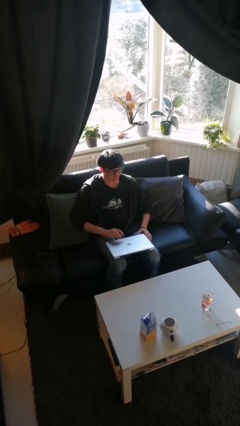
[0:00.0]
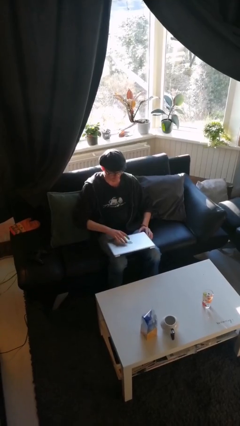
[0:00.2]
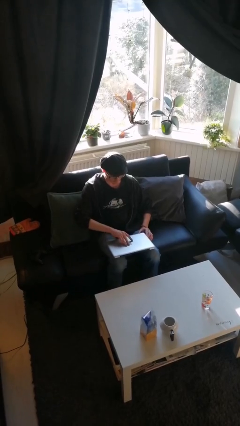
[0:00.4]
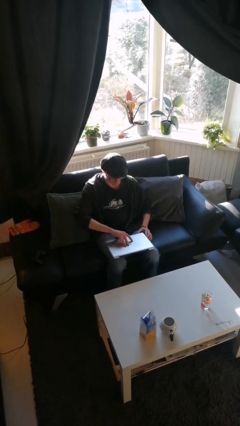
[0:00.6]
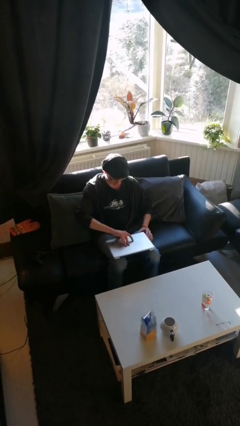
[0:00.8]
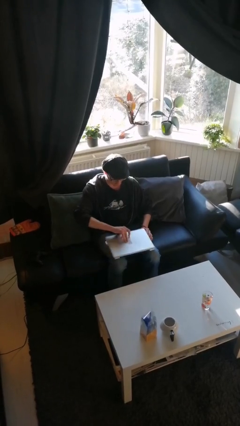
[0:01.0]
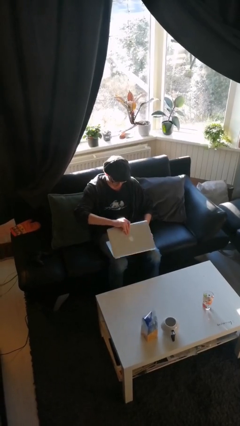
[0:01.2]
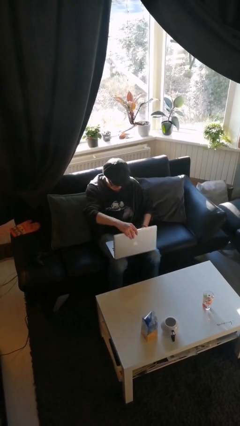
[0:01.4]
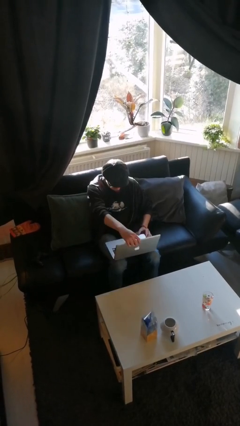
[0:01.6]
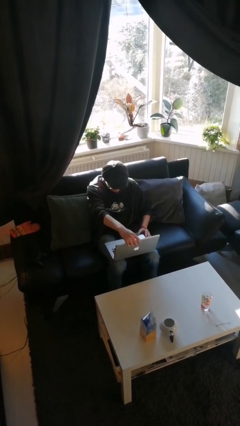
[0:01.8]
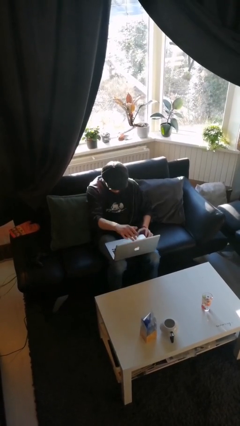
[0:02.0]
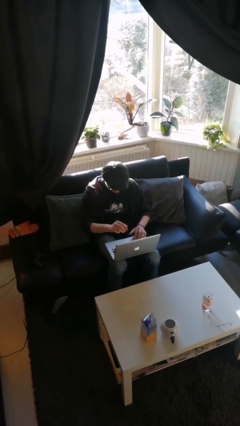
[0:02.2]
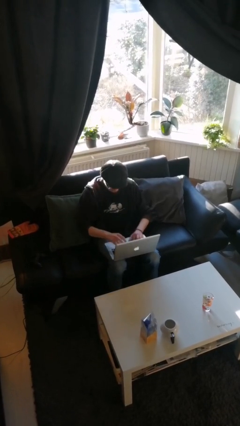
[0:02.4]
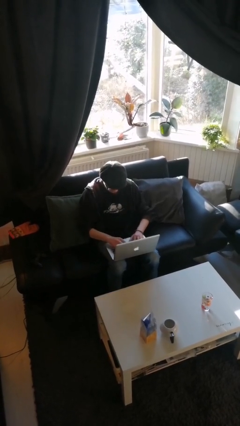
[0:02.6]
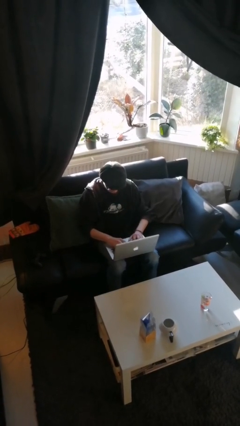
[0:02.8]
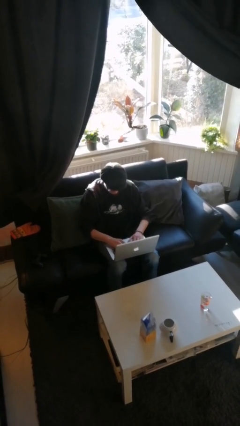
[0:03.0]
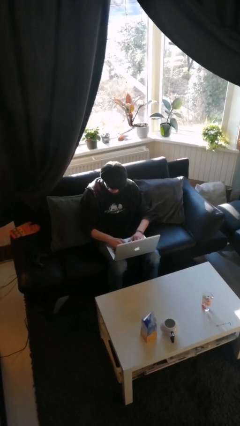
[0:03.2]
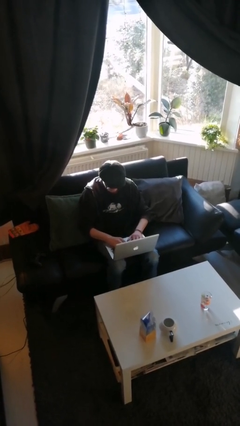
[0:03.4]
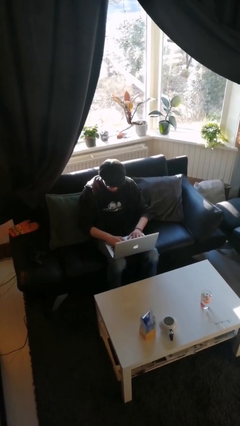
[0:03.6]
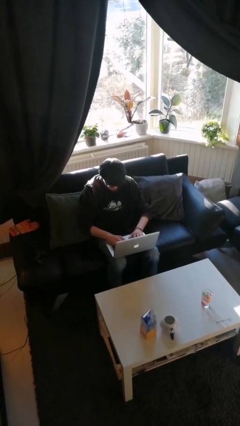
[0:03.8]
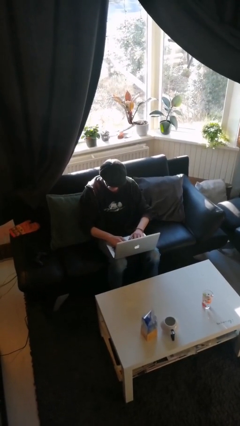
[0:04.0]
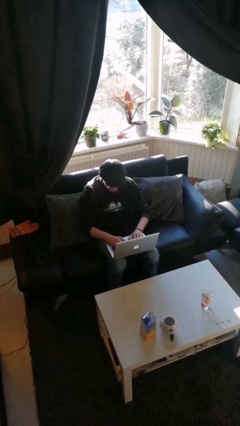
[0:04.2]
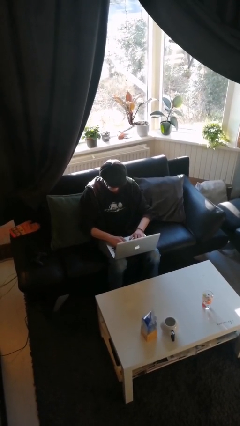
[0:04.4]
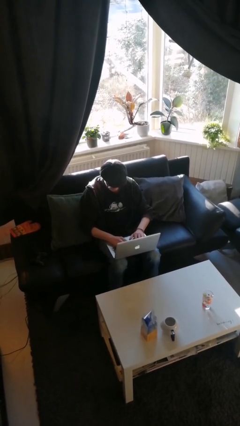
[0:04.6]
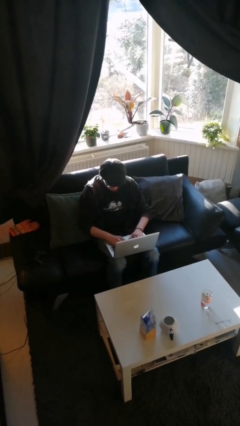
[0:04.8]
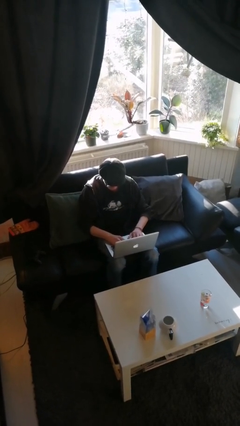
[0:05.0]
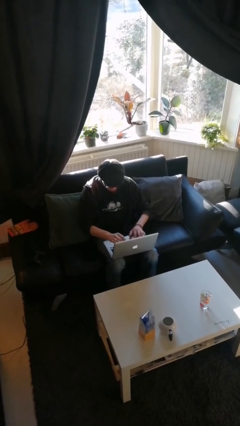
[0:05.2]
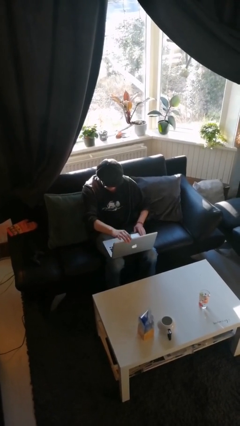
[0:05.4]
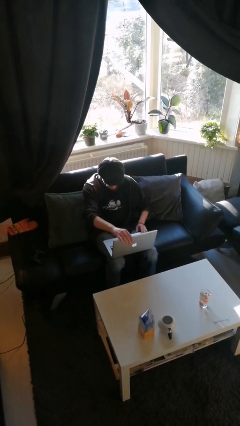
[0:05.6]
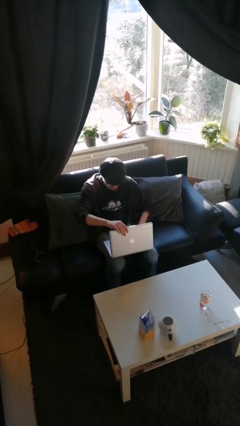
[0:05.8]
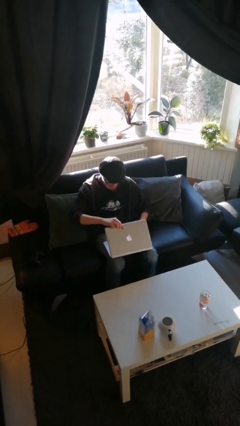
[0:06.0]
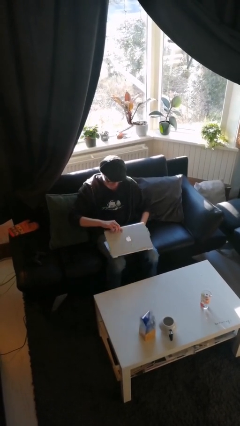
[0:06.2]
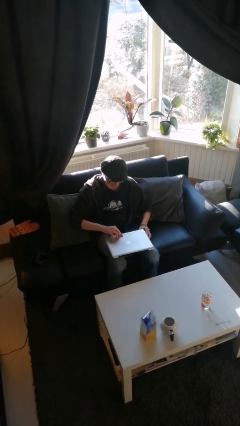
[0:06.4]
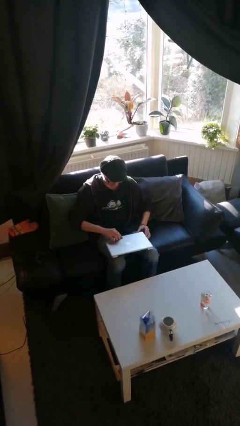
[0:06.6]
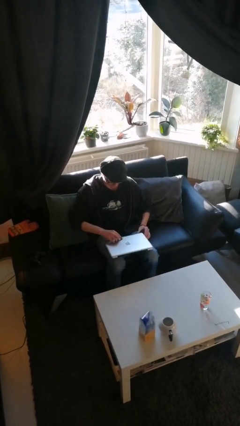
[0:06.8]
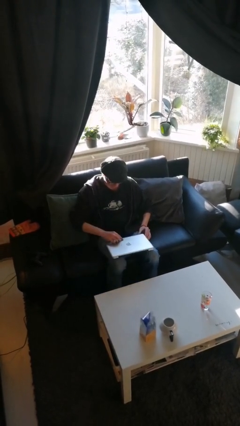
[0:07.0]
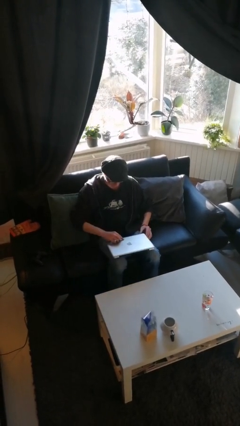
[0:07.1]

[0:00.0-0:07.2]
person interacts with laptop

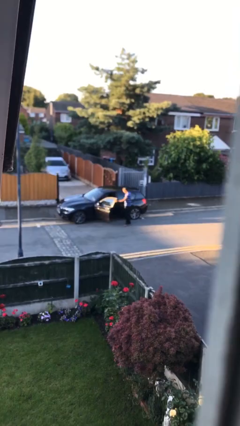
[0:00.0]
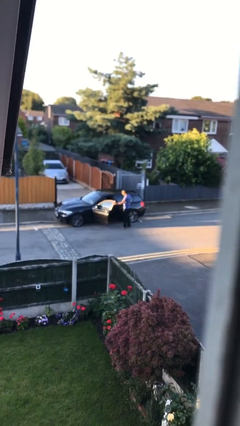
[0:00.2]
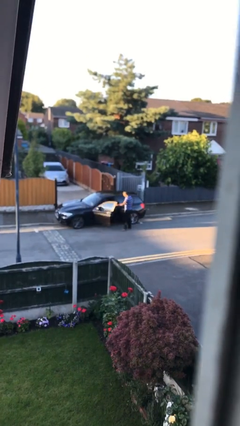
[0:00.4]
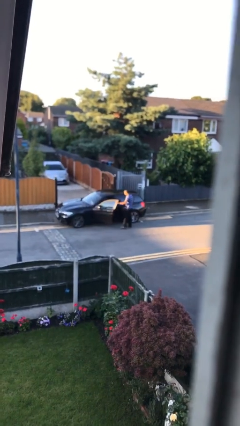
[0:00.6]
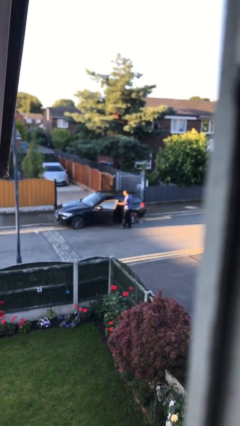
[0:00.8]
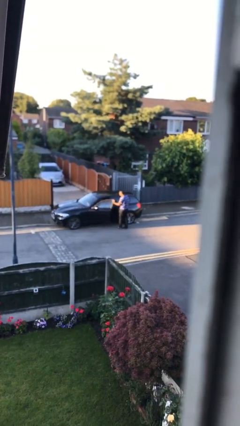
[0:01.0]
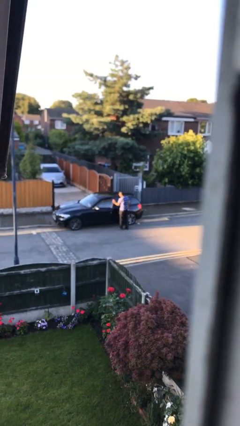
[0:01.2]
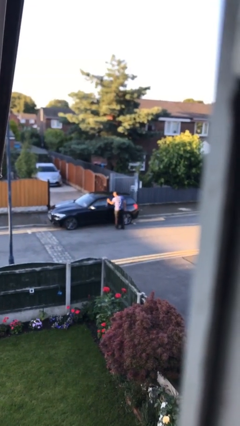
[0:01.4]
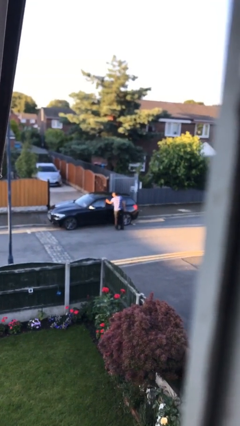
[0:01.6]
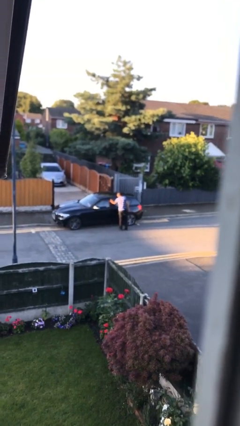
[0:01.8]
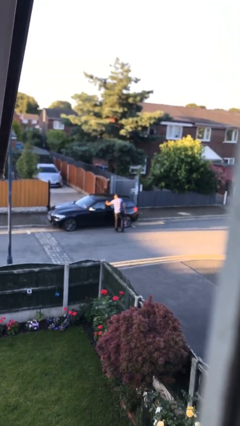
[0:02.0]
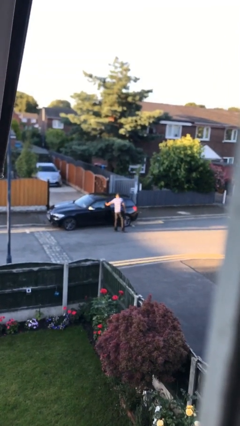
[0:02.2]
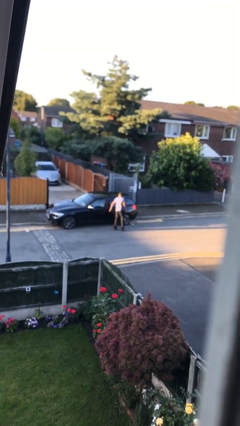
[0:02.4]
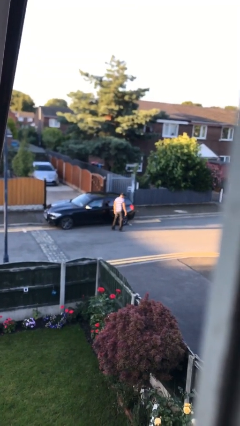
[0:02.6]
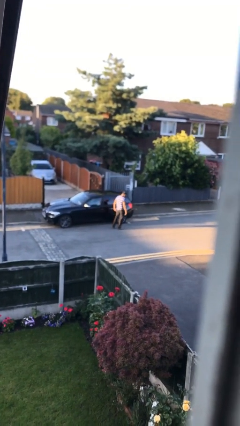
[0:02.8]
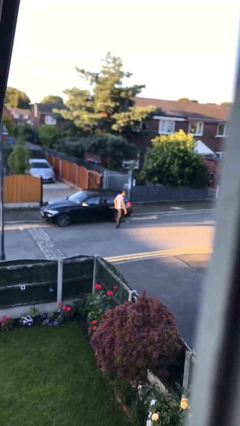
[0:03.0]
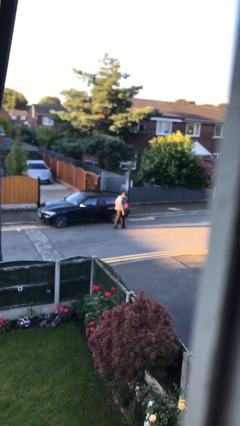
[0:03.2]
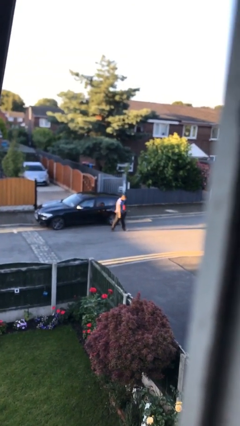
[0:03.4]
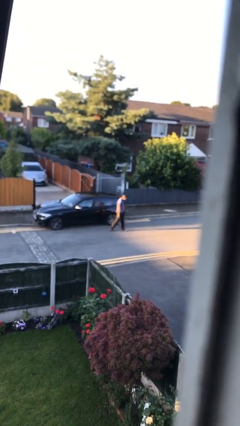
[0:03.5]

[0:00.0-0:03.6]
person closes car door

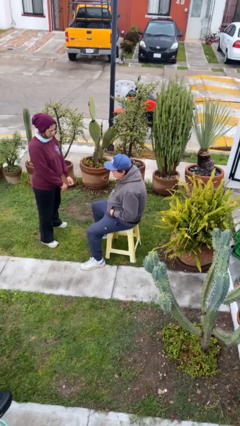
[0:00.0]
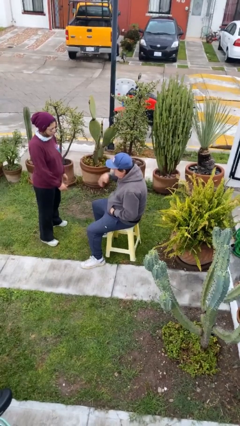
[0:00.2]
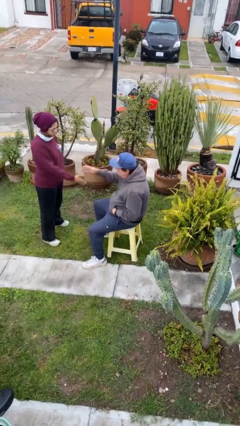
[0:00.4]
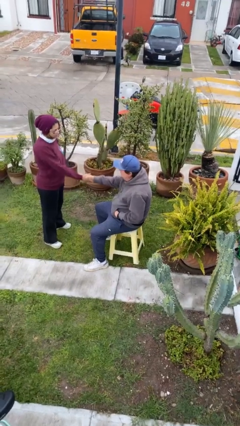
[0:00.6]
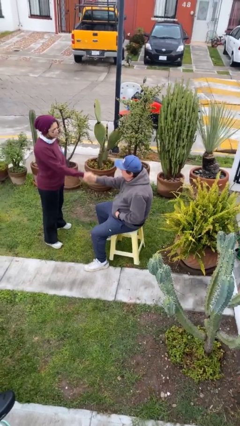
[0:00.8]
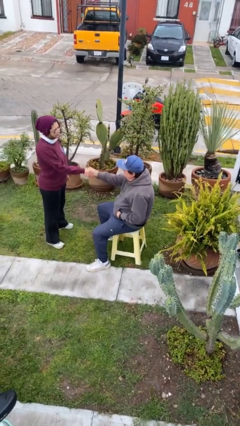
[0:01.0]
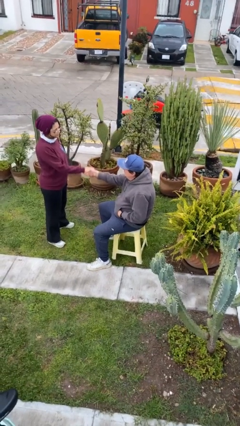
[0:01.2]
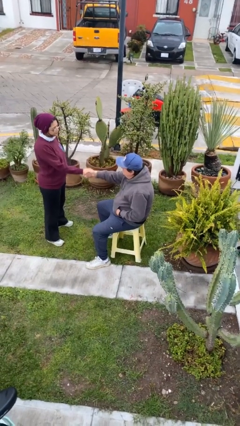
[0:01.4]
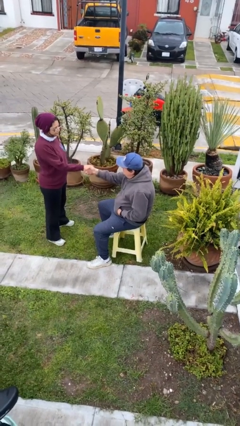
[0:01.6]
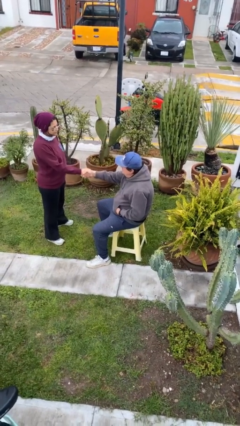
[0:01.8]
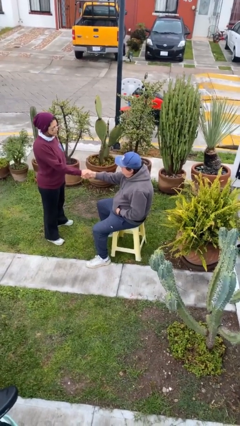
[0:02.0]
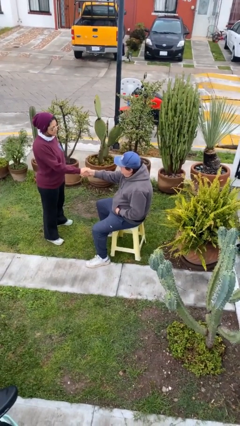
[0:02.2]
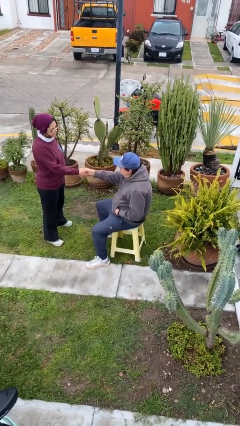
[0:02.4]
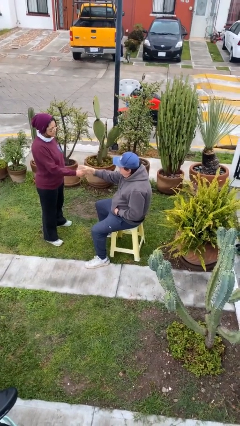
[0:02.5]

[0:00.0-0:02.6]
person shakes hand

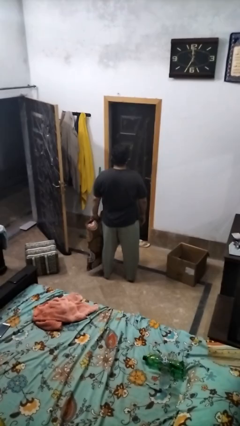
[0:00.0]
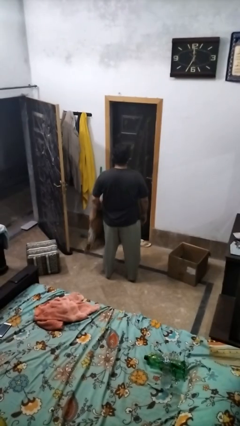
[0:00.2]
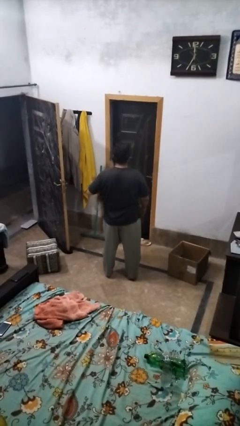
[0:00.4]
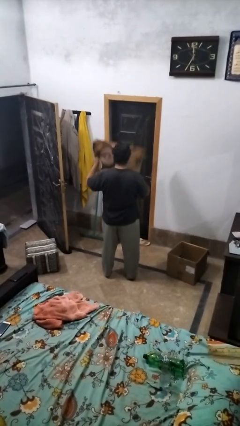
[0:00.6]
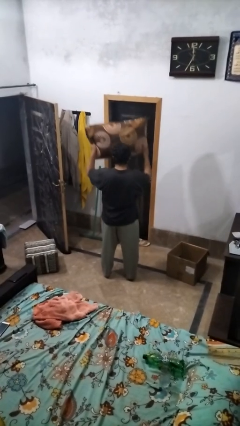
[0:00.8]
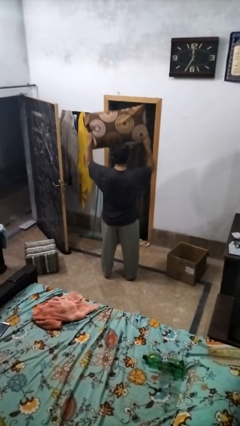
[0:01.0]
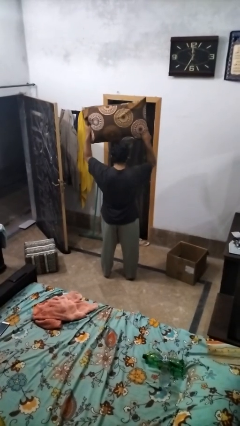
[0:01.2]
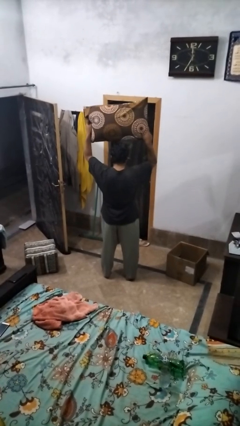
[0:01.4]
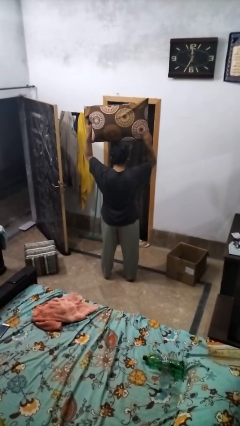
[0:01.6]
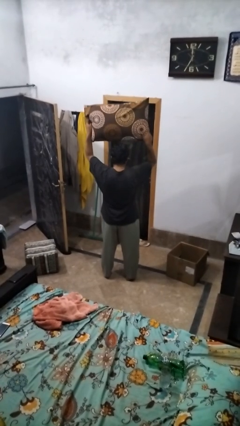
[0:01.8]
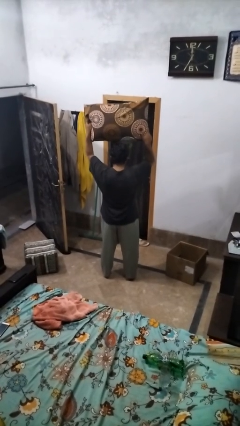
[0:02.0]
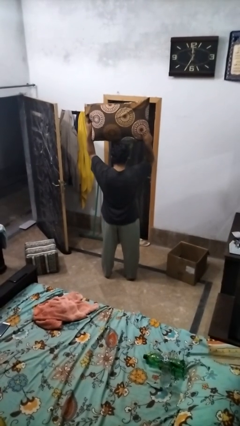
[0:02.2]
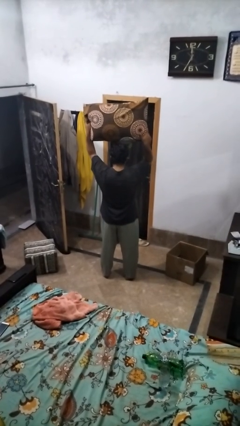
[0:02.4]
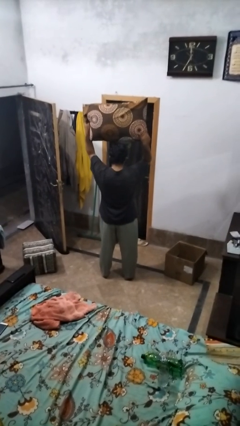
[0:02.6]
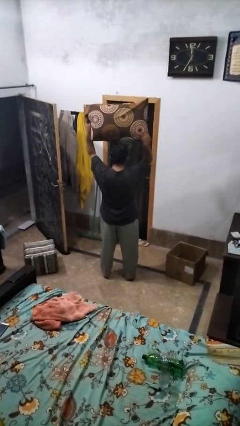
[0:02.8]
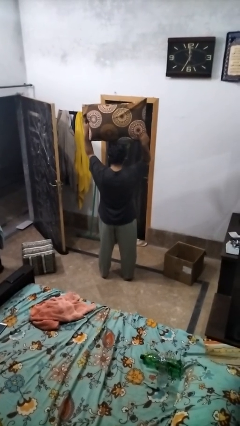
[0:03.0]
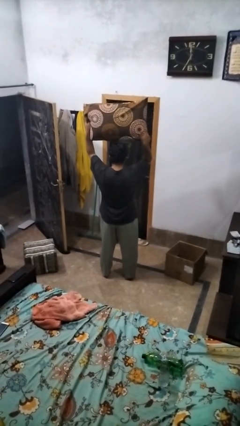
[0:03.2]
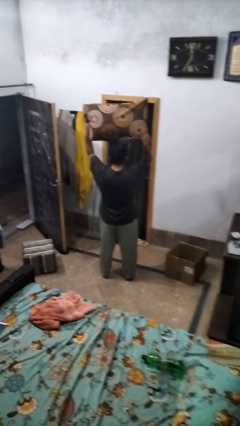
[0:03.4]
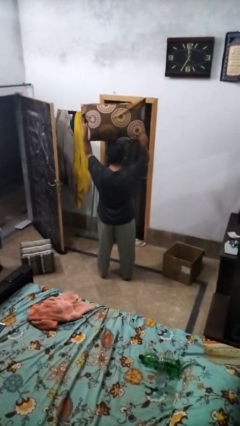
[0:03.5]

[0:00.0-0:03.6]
person holds object above head

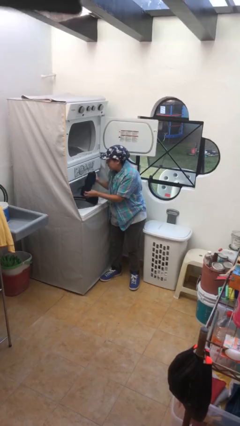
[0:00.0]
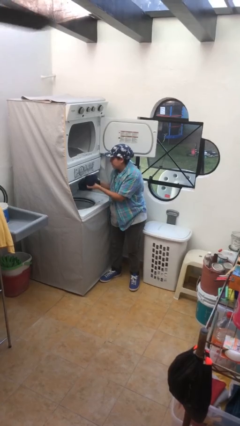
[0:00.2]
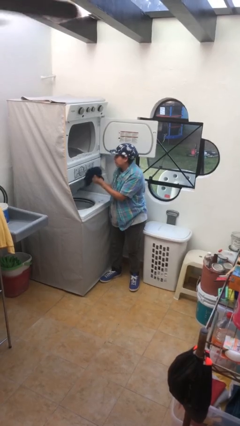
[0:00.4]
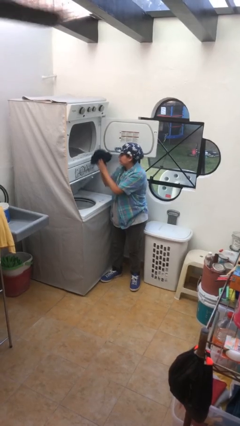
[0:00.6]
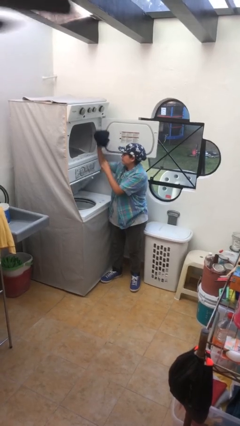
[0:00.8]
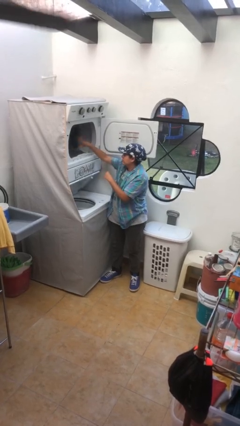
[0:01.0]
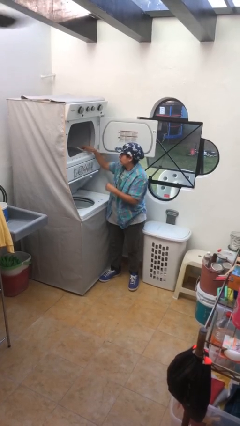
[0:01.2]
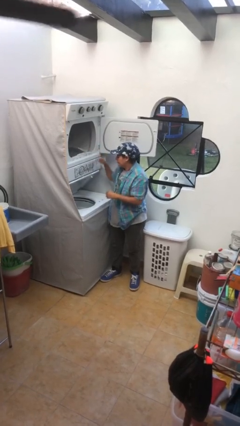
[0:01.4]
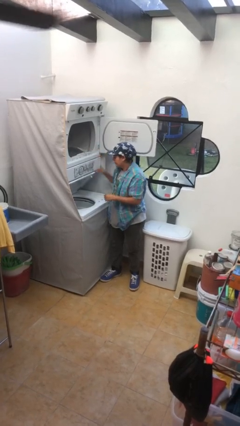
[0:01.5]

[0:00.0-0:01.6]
person loads dryer
